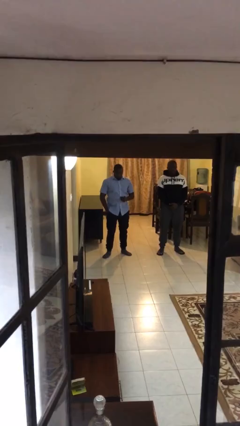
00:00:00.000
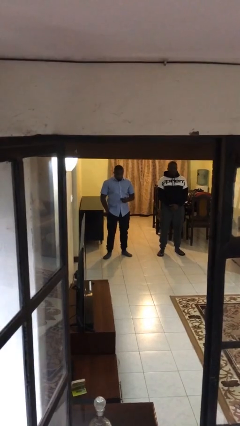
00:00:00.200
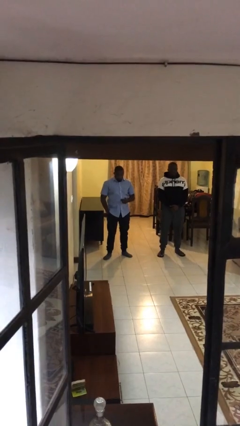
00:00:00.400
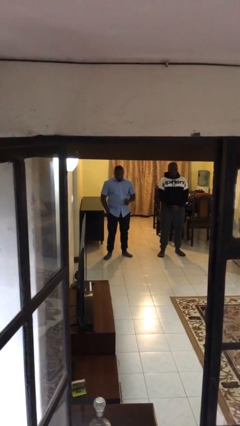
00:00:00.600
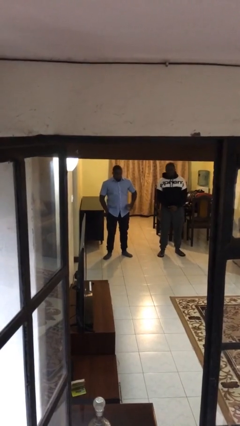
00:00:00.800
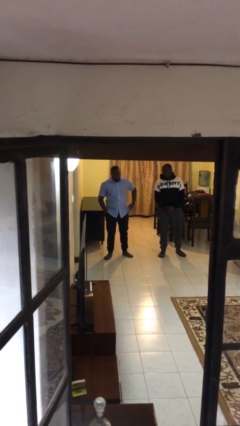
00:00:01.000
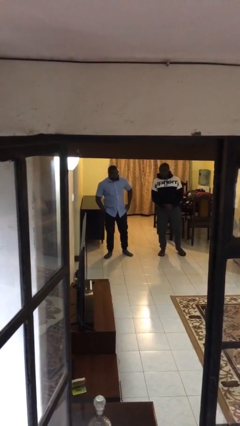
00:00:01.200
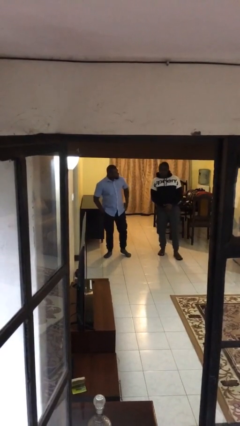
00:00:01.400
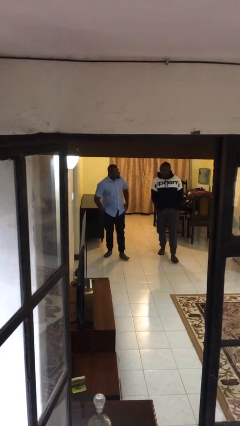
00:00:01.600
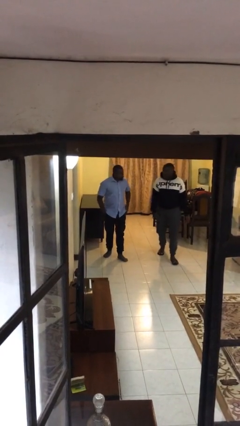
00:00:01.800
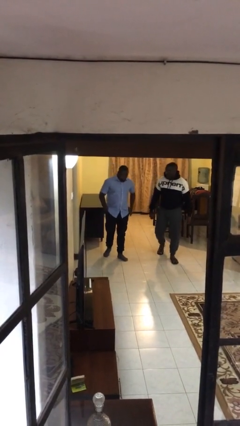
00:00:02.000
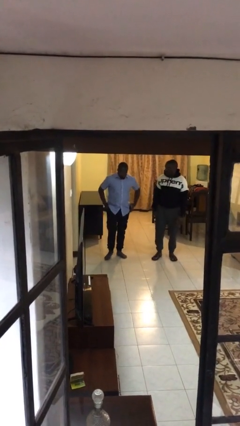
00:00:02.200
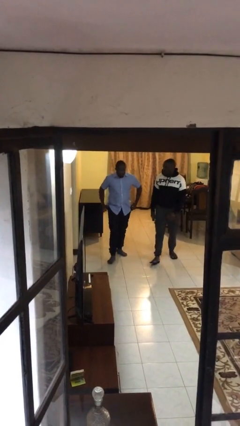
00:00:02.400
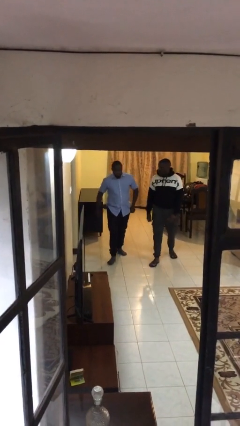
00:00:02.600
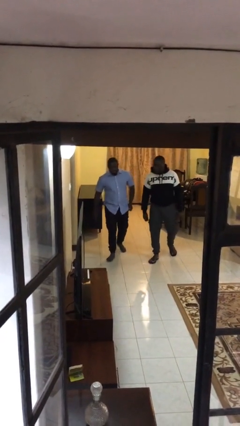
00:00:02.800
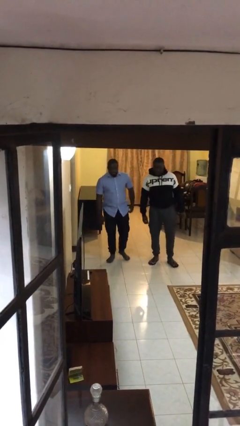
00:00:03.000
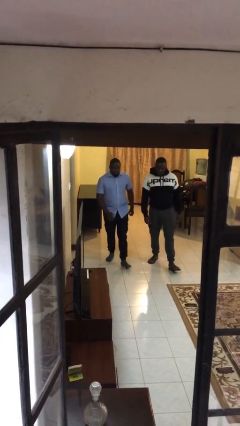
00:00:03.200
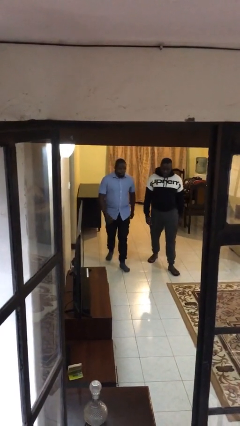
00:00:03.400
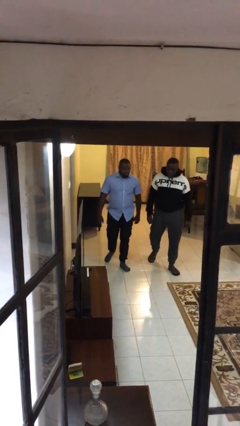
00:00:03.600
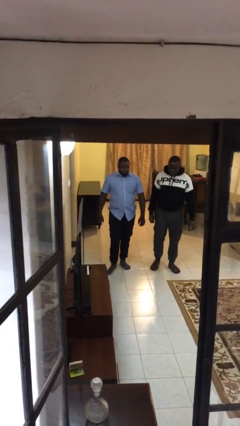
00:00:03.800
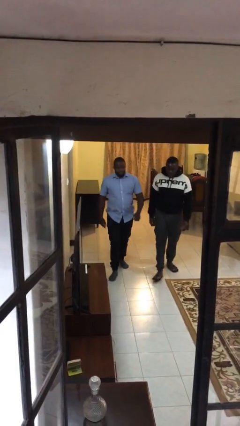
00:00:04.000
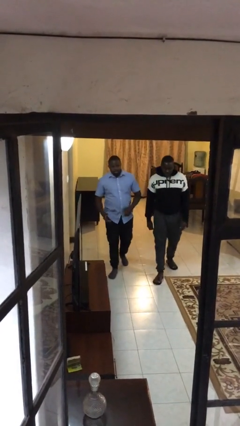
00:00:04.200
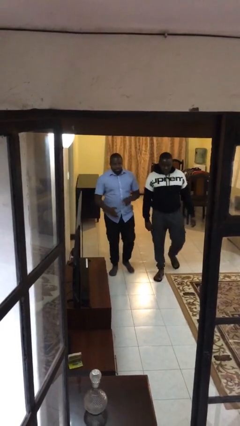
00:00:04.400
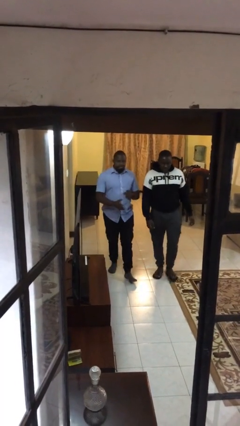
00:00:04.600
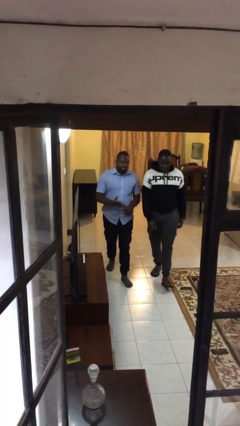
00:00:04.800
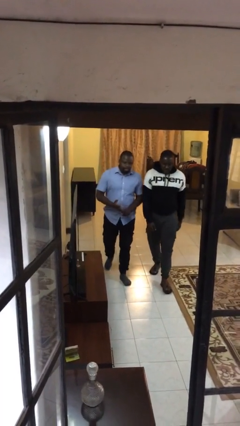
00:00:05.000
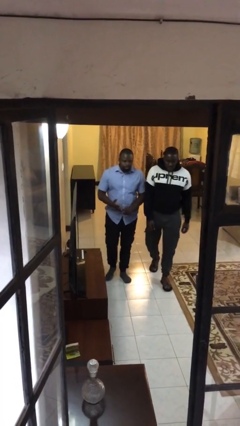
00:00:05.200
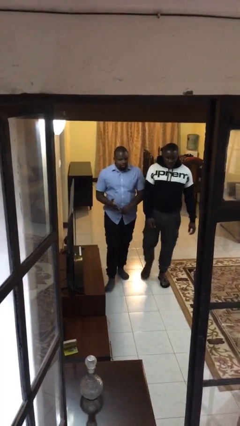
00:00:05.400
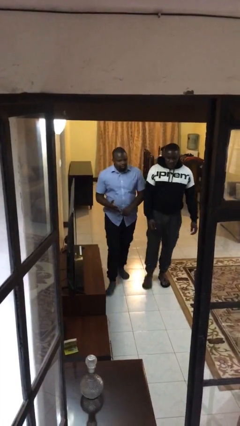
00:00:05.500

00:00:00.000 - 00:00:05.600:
person talks to person

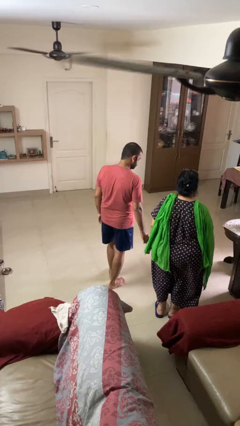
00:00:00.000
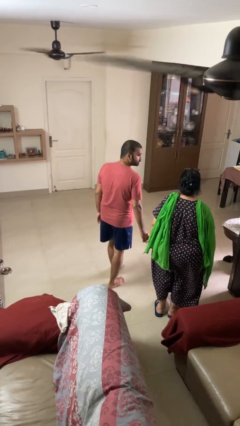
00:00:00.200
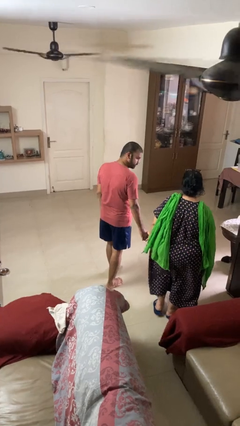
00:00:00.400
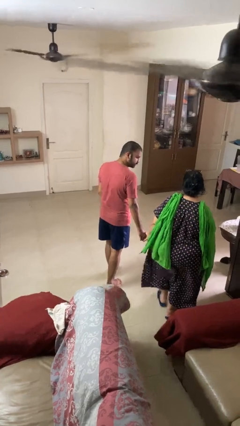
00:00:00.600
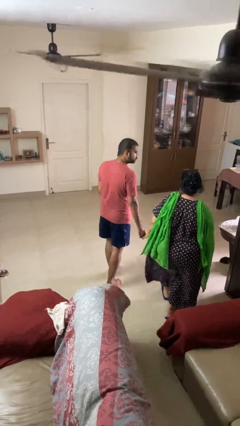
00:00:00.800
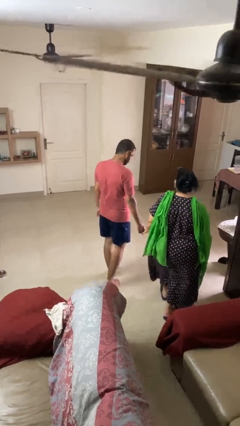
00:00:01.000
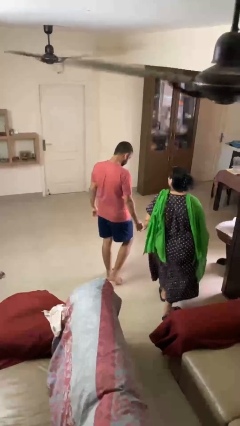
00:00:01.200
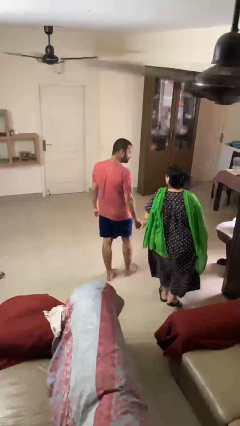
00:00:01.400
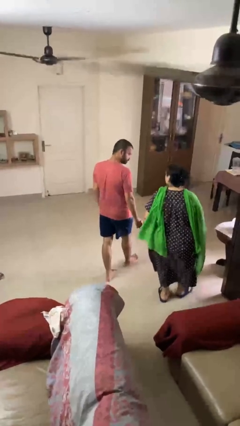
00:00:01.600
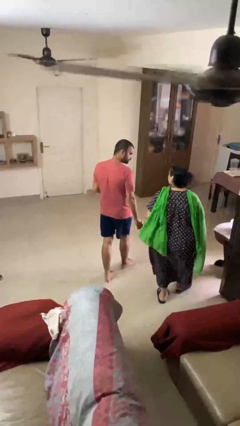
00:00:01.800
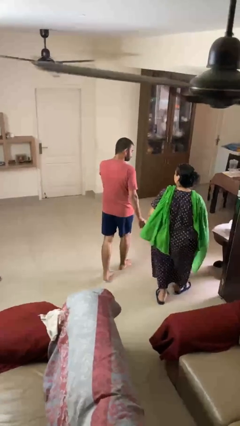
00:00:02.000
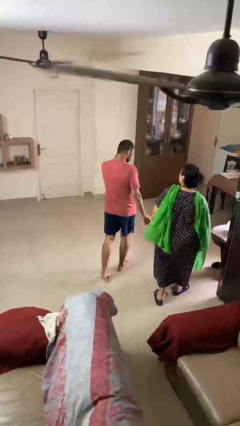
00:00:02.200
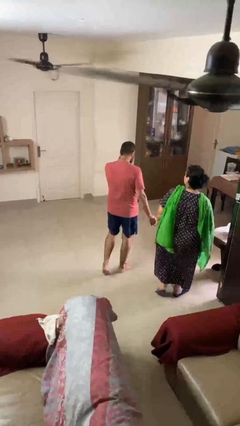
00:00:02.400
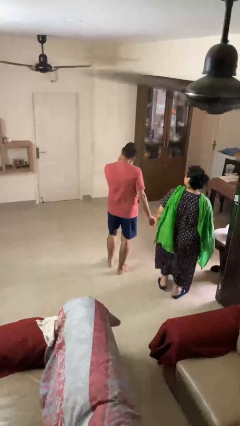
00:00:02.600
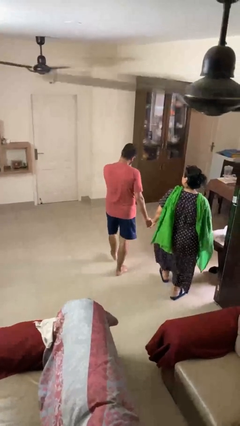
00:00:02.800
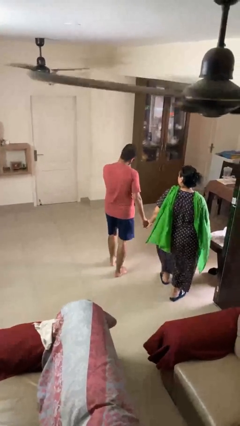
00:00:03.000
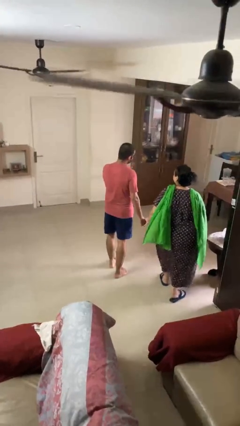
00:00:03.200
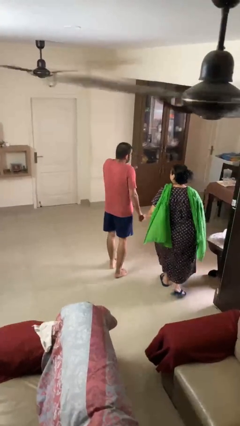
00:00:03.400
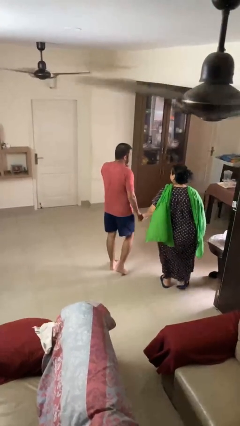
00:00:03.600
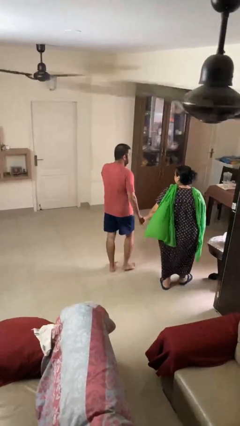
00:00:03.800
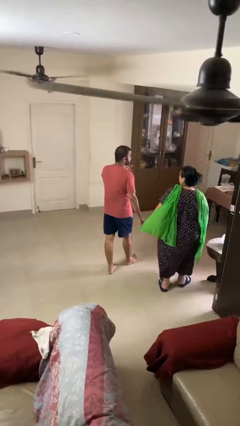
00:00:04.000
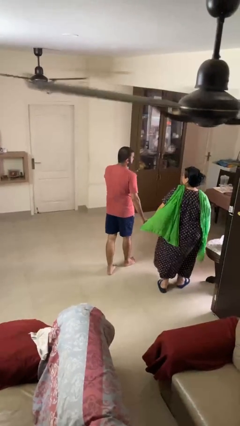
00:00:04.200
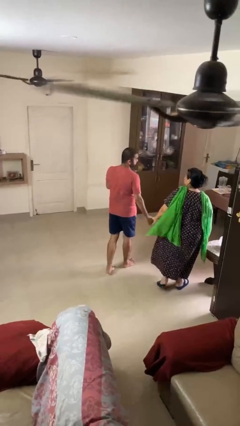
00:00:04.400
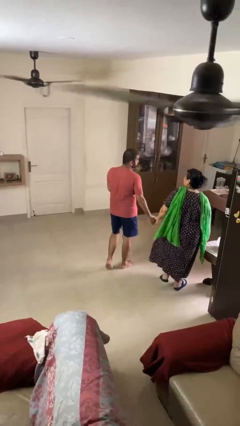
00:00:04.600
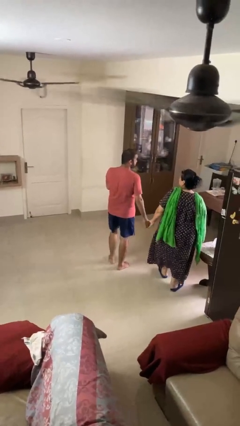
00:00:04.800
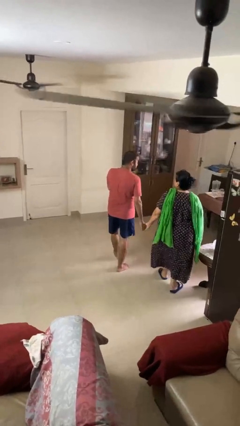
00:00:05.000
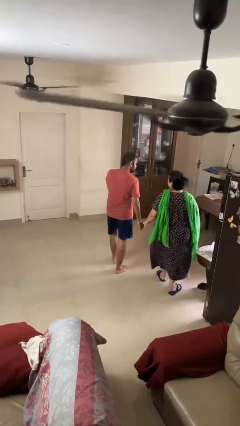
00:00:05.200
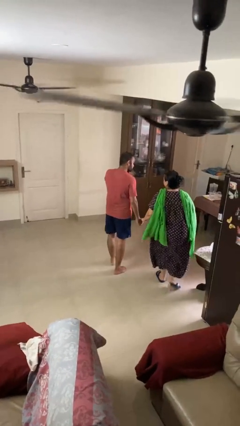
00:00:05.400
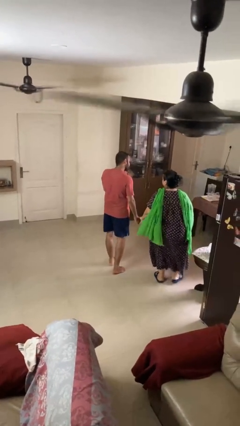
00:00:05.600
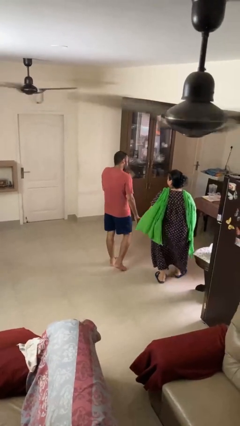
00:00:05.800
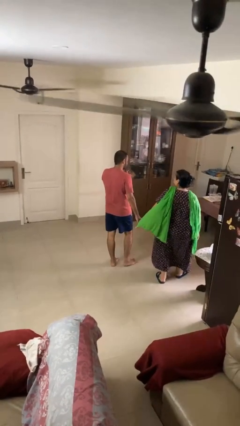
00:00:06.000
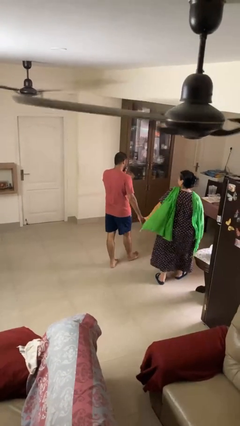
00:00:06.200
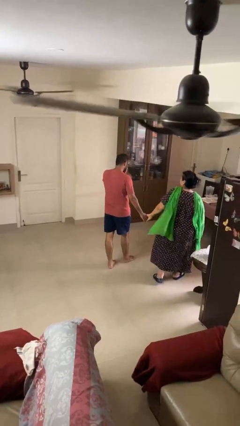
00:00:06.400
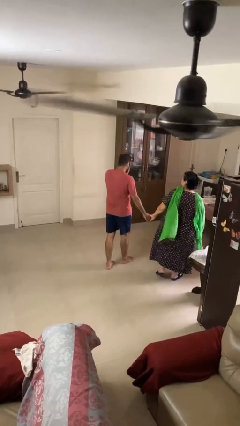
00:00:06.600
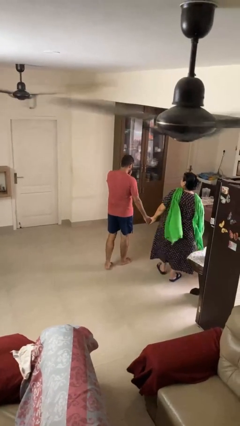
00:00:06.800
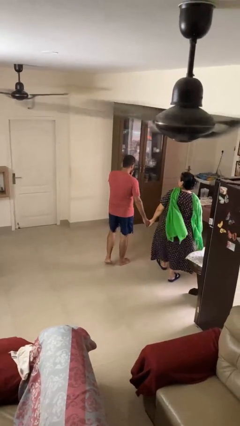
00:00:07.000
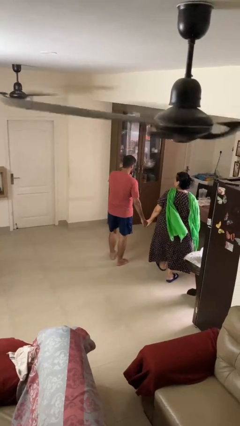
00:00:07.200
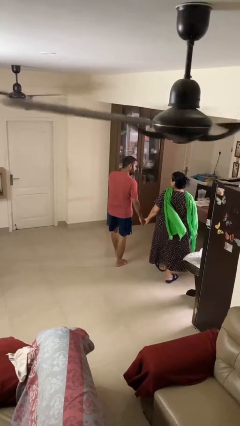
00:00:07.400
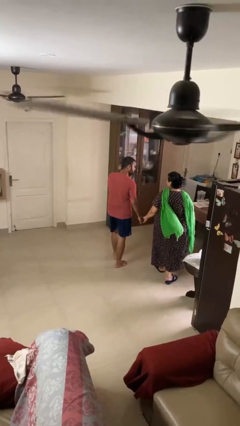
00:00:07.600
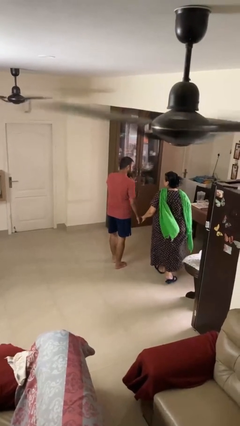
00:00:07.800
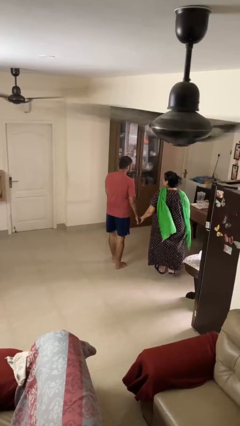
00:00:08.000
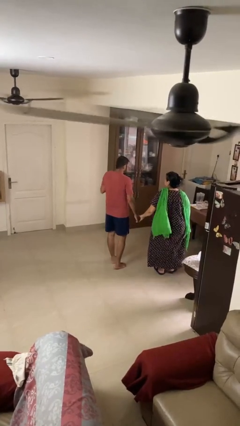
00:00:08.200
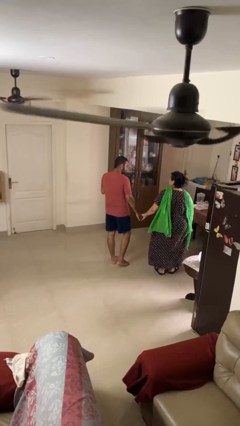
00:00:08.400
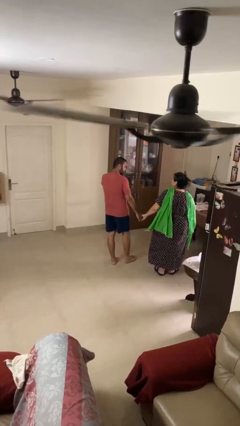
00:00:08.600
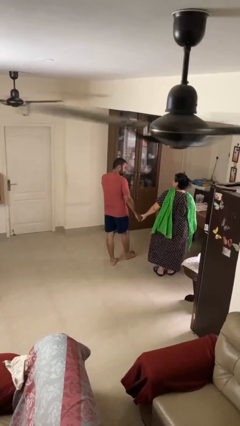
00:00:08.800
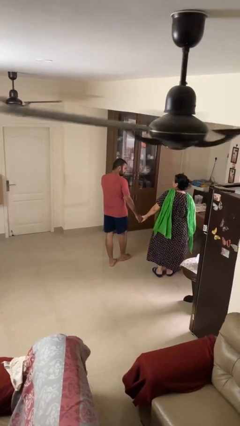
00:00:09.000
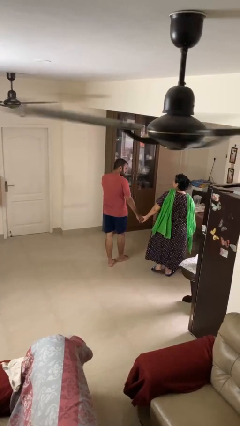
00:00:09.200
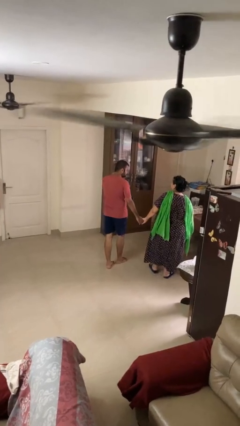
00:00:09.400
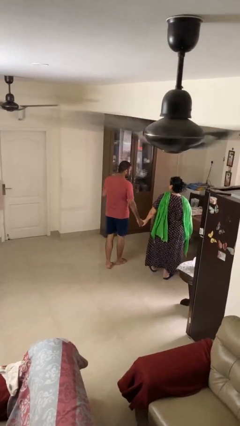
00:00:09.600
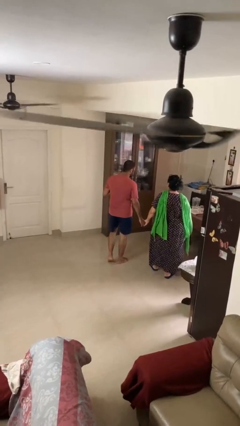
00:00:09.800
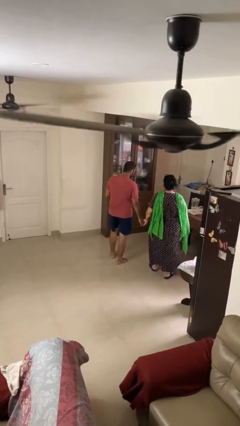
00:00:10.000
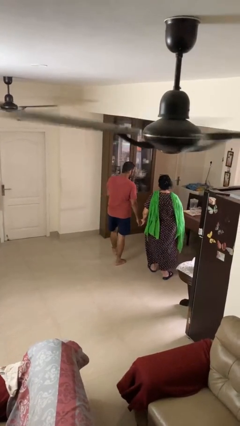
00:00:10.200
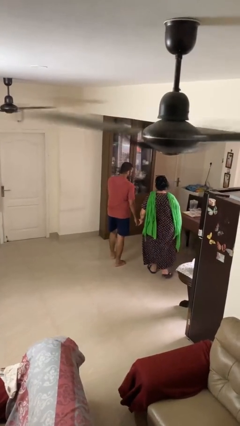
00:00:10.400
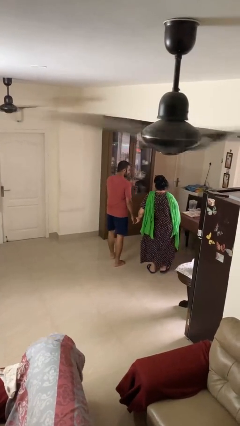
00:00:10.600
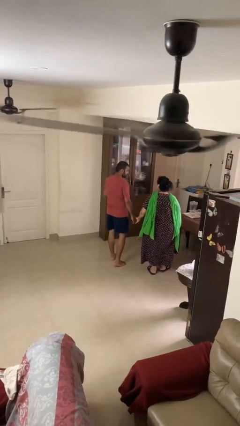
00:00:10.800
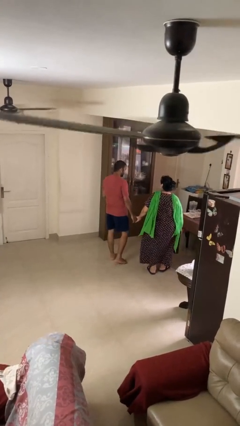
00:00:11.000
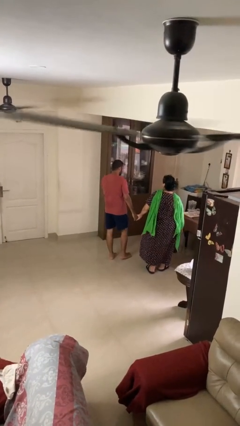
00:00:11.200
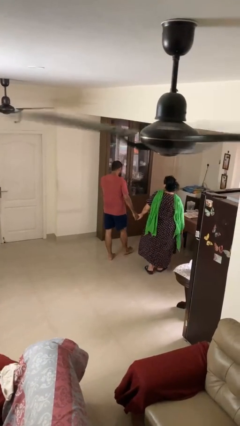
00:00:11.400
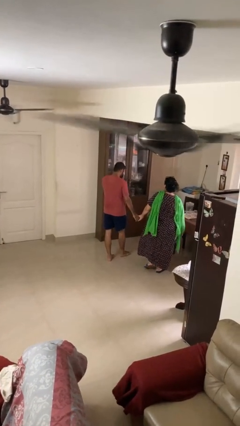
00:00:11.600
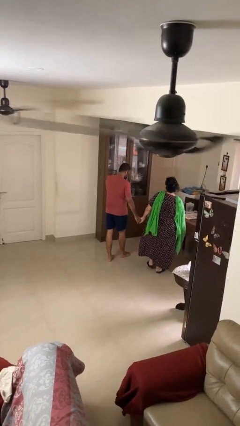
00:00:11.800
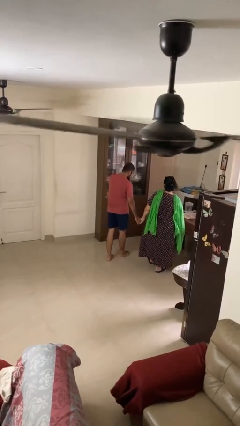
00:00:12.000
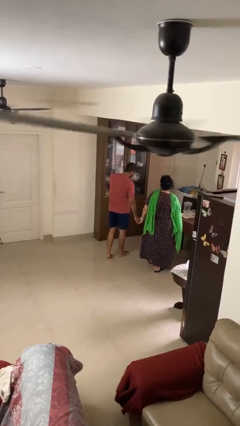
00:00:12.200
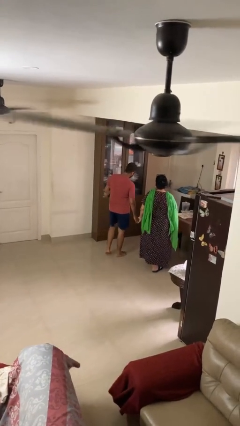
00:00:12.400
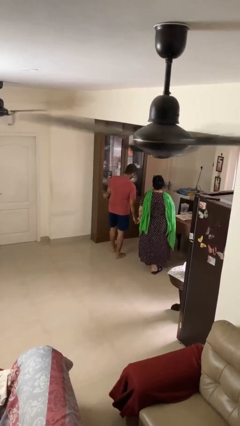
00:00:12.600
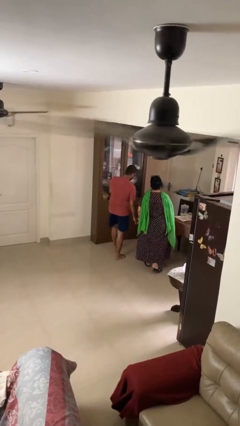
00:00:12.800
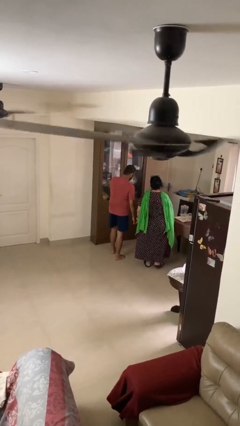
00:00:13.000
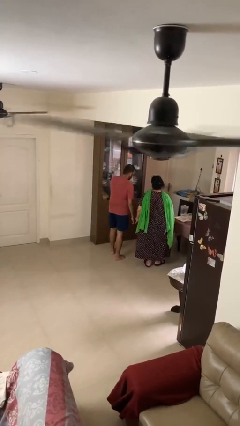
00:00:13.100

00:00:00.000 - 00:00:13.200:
person holds hand
